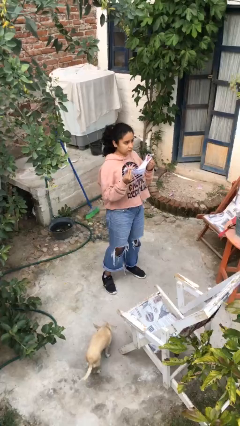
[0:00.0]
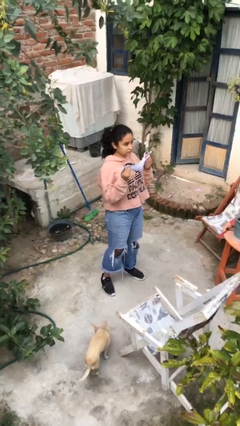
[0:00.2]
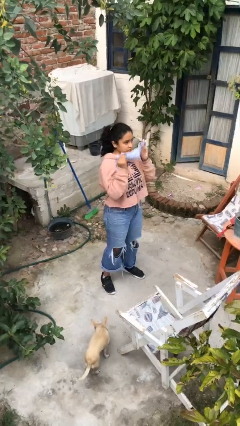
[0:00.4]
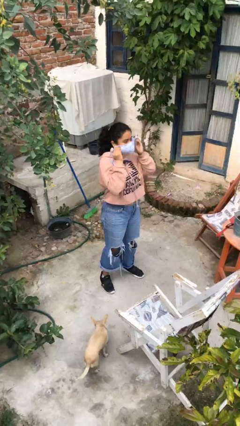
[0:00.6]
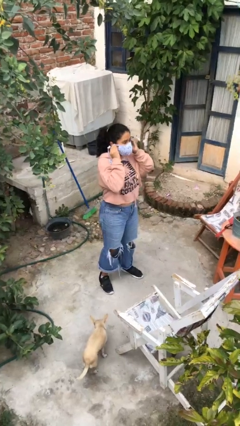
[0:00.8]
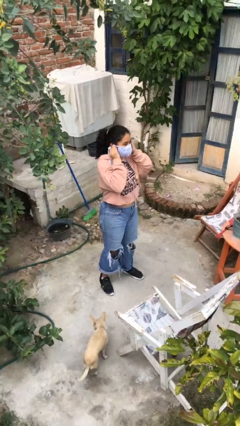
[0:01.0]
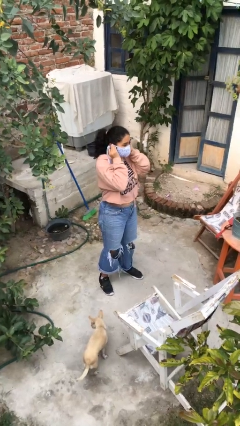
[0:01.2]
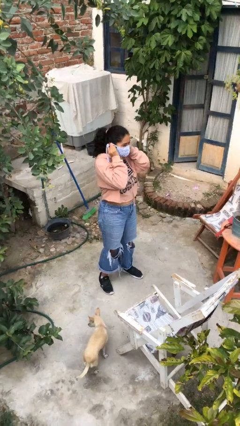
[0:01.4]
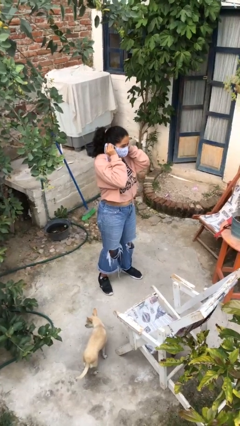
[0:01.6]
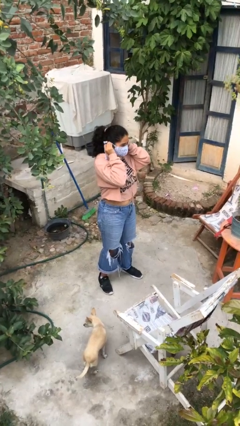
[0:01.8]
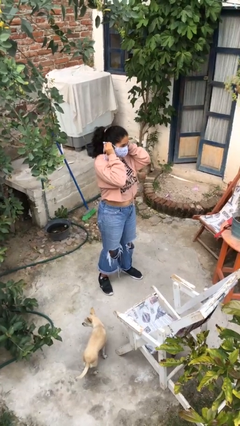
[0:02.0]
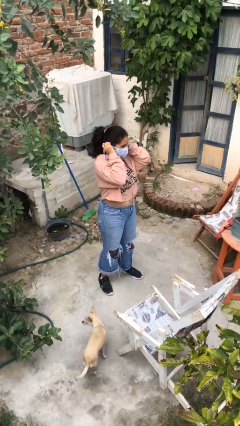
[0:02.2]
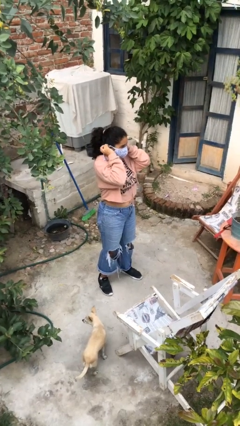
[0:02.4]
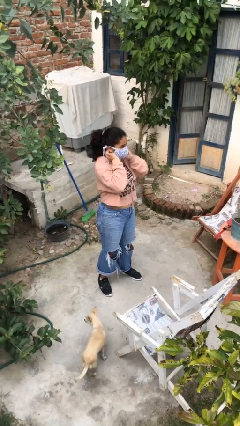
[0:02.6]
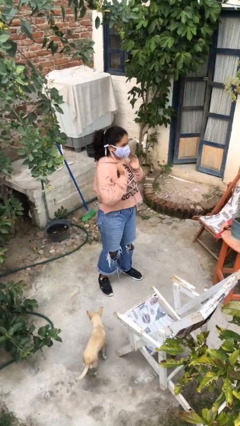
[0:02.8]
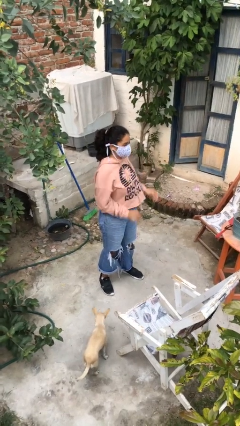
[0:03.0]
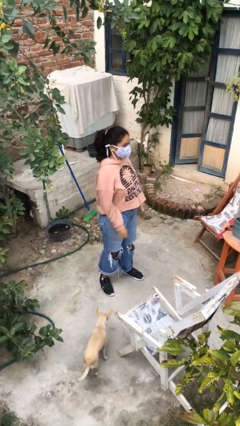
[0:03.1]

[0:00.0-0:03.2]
person puts on facemask

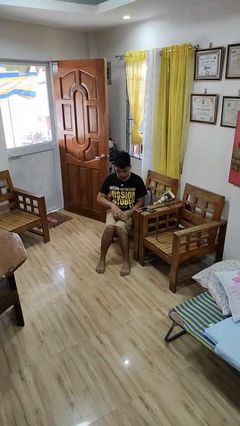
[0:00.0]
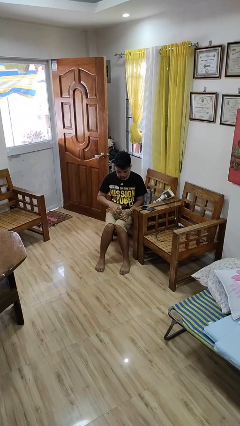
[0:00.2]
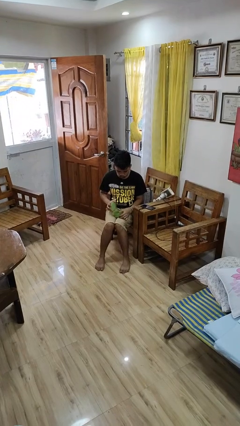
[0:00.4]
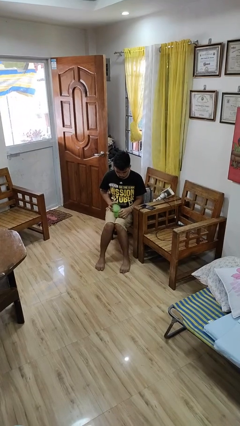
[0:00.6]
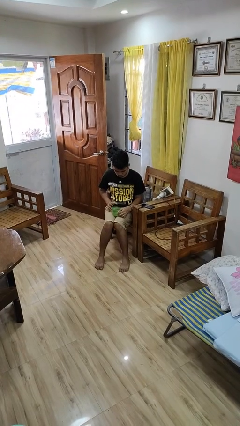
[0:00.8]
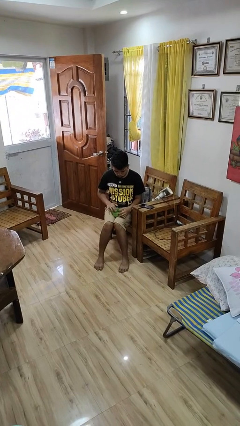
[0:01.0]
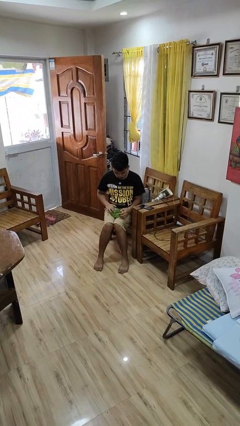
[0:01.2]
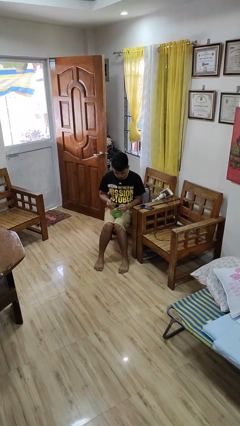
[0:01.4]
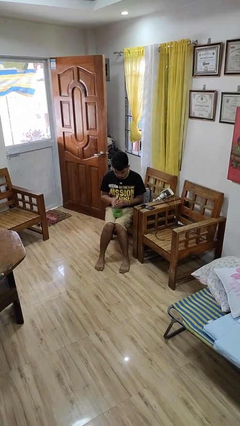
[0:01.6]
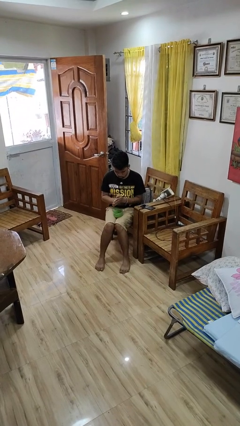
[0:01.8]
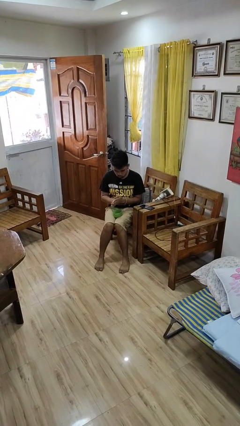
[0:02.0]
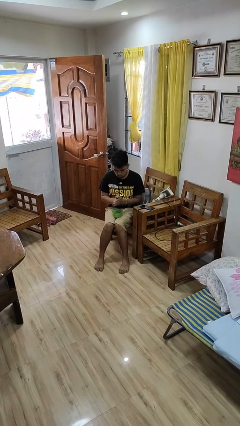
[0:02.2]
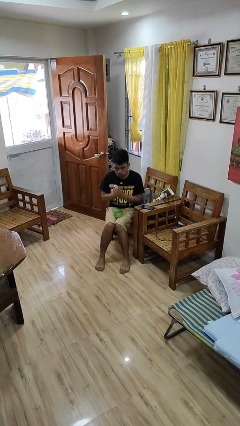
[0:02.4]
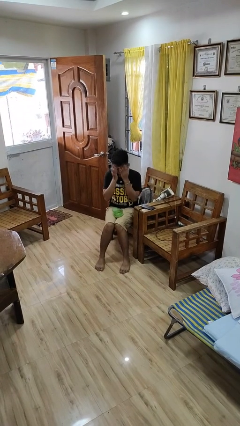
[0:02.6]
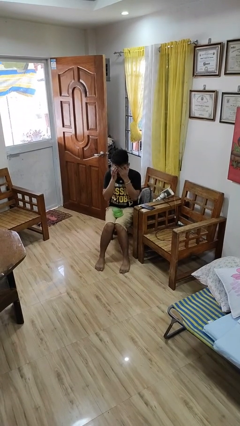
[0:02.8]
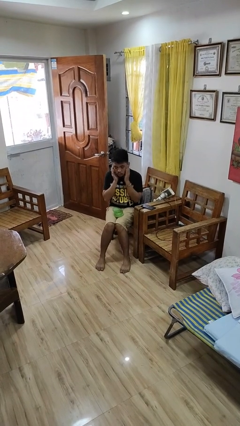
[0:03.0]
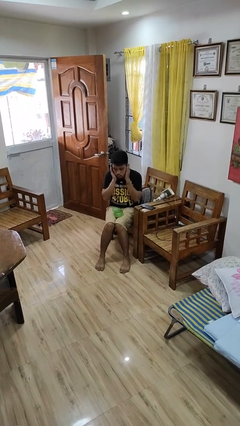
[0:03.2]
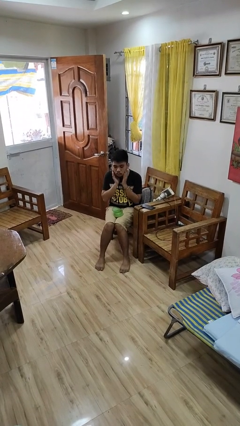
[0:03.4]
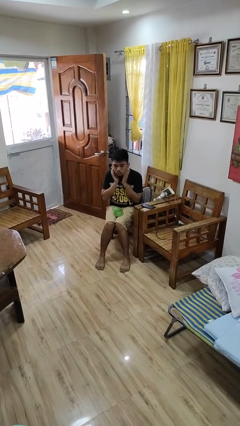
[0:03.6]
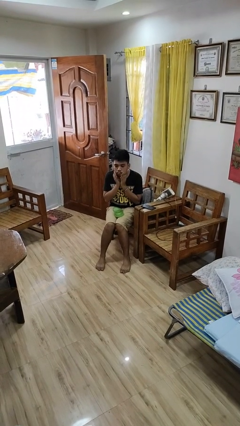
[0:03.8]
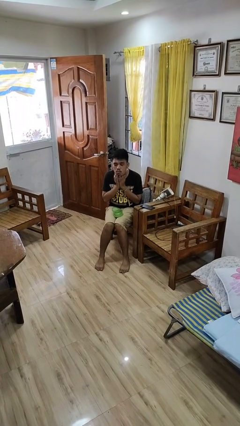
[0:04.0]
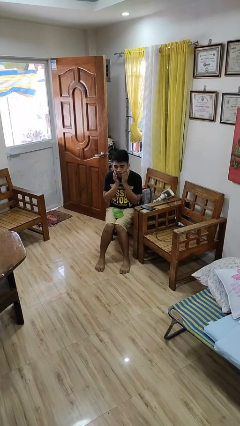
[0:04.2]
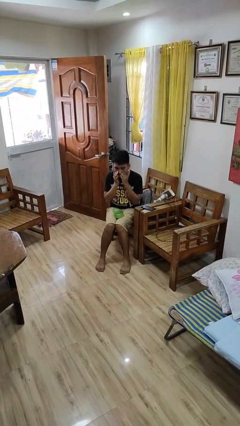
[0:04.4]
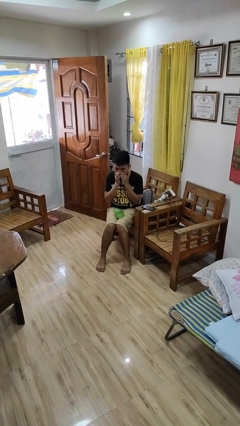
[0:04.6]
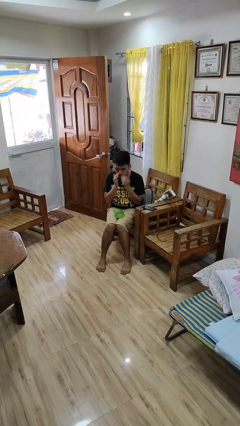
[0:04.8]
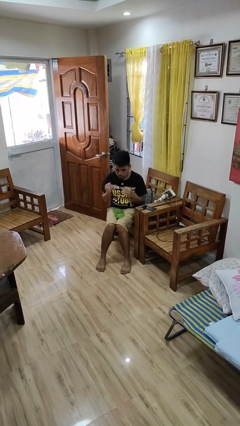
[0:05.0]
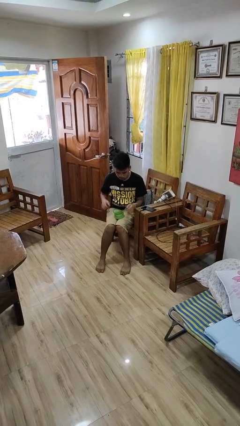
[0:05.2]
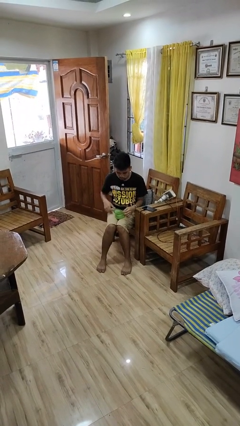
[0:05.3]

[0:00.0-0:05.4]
person applies facial moisturizer

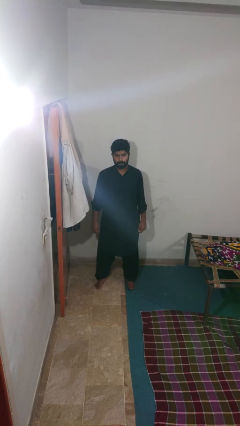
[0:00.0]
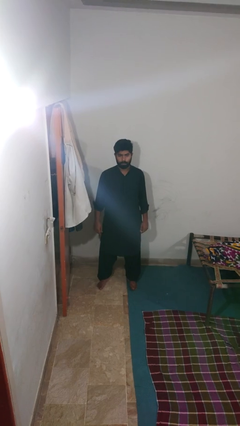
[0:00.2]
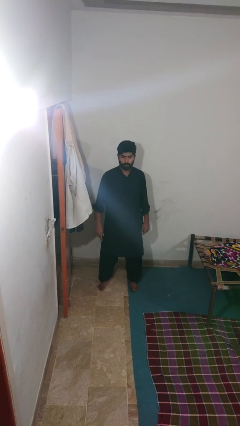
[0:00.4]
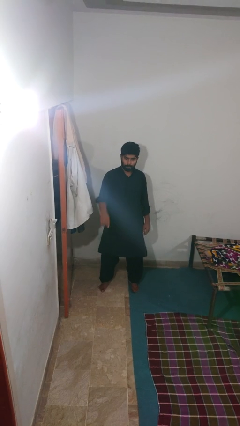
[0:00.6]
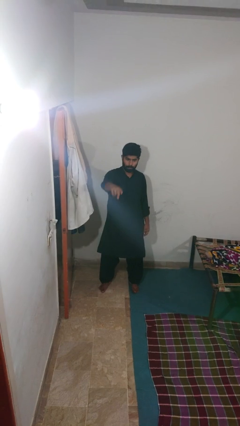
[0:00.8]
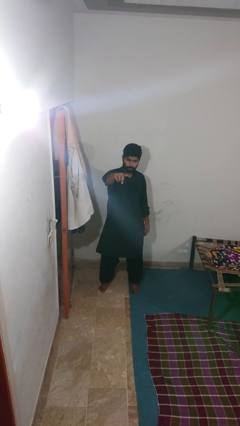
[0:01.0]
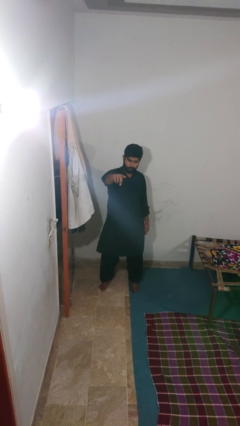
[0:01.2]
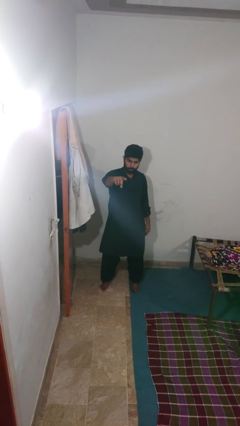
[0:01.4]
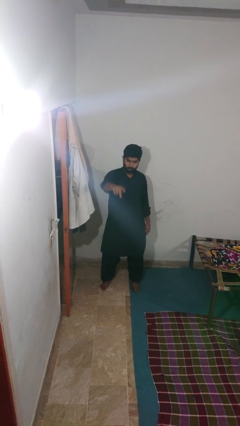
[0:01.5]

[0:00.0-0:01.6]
person points at person

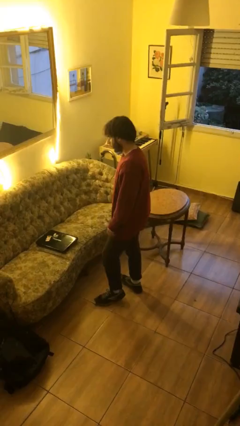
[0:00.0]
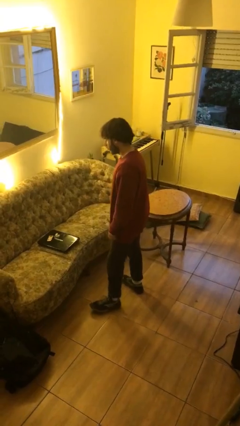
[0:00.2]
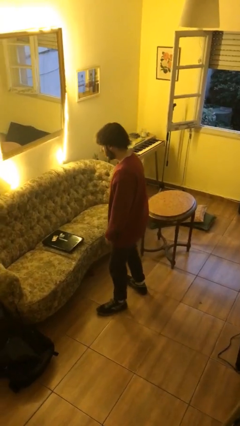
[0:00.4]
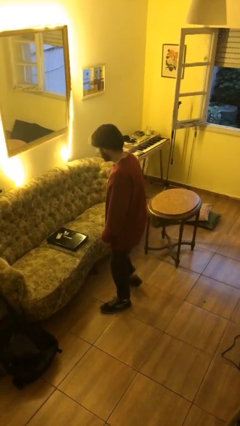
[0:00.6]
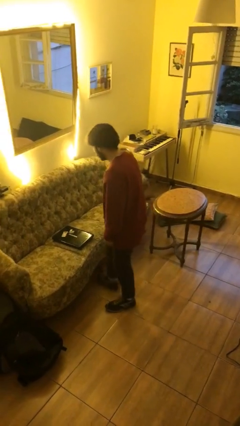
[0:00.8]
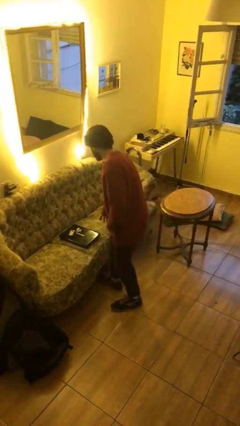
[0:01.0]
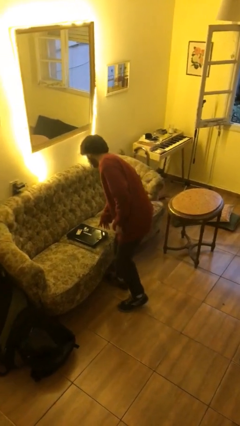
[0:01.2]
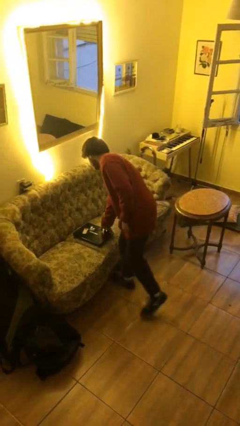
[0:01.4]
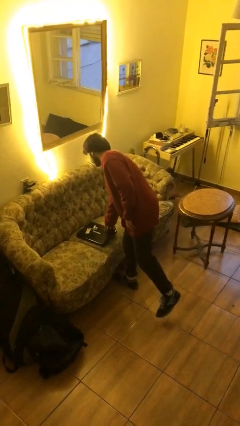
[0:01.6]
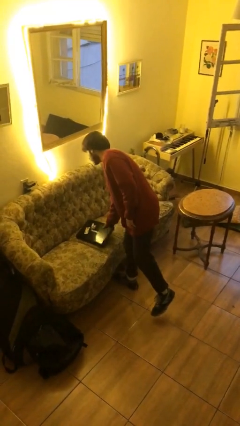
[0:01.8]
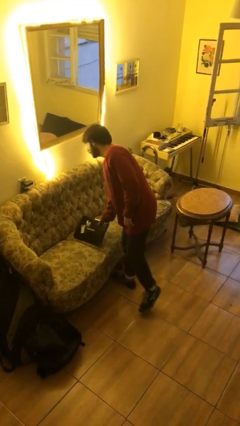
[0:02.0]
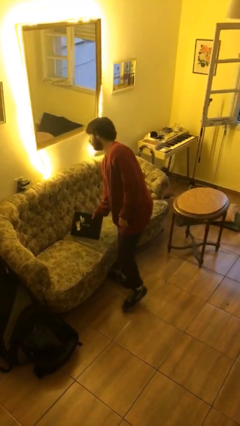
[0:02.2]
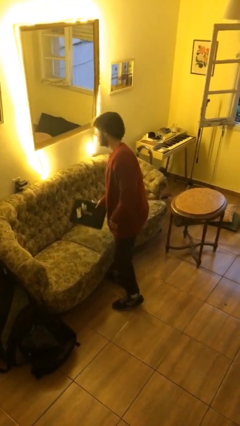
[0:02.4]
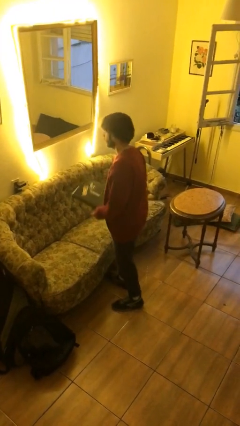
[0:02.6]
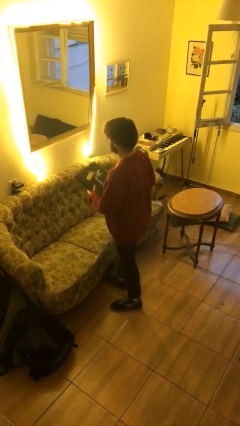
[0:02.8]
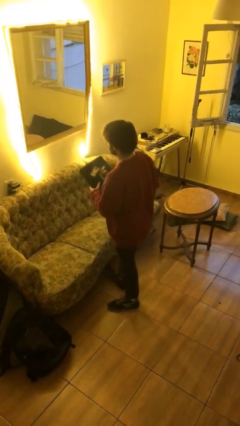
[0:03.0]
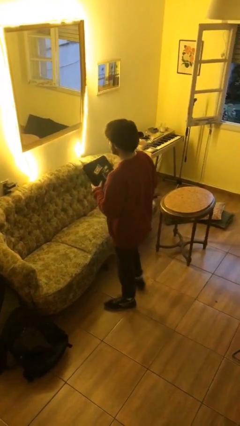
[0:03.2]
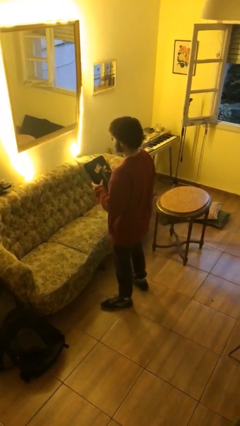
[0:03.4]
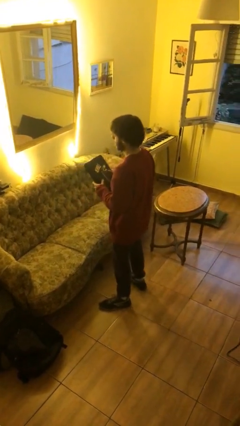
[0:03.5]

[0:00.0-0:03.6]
person picks up object from couch

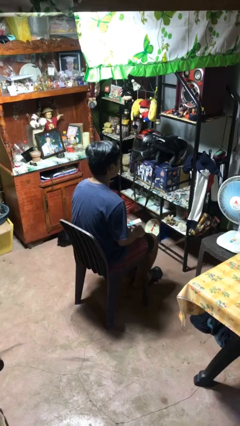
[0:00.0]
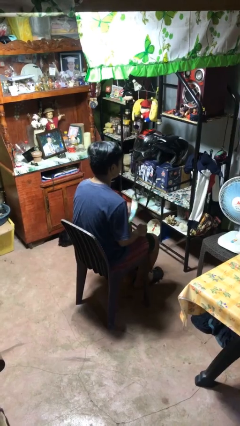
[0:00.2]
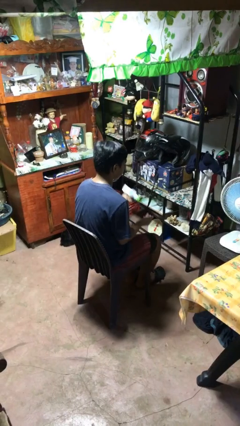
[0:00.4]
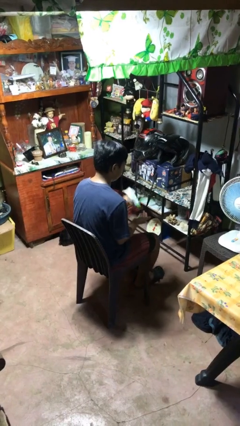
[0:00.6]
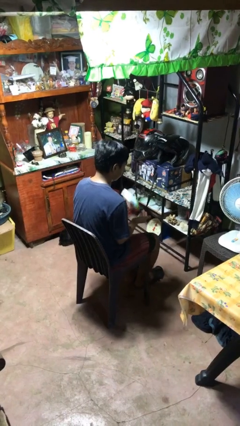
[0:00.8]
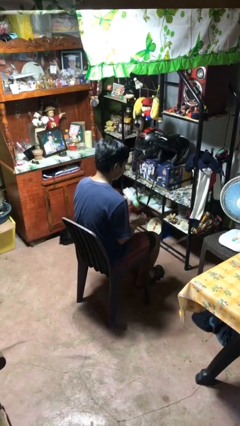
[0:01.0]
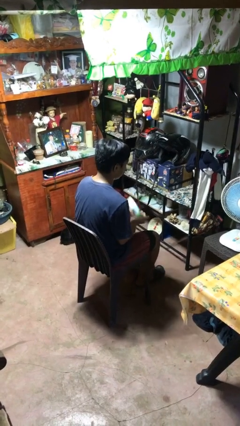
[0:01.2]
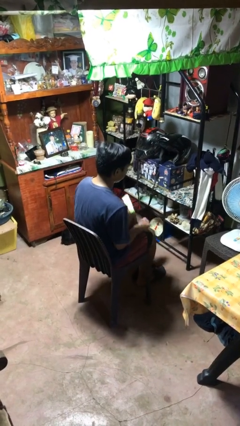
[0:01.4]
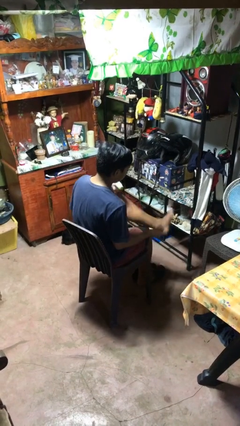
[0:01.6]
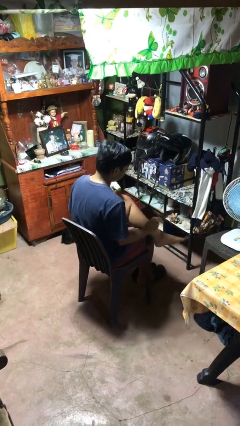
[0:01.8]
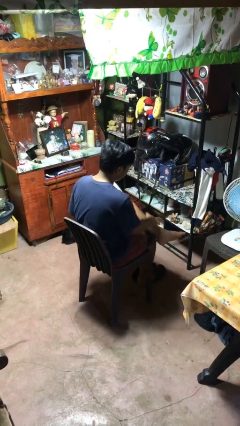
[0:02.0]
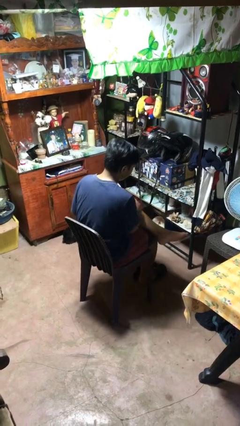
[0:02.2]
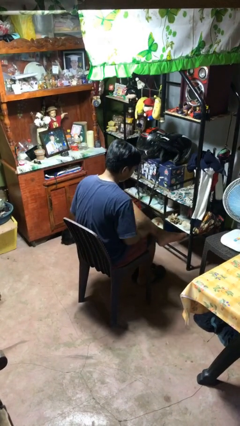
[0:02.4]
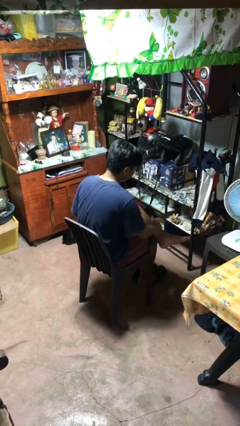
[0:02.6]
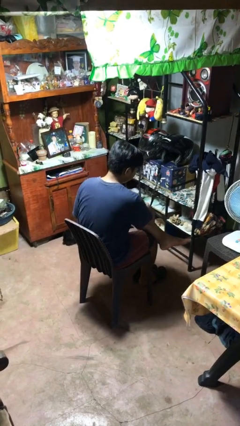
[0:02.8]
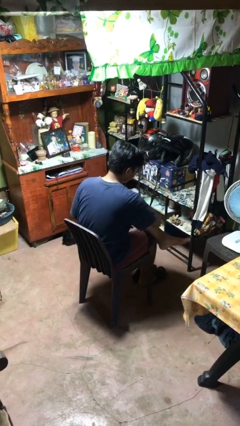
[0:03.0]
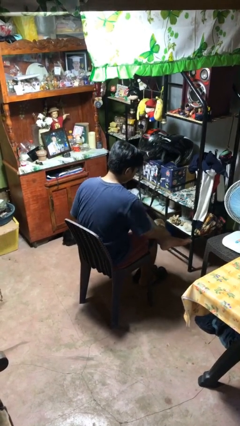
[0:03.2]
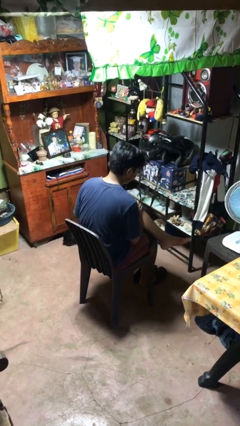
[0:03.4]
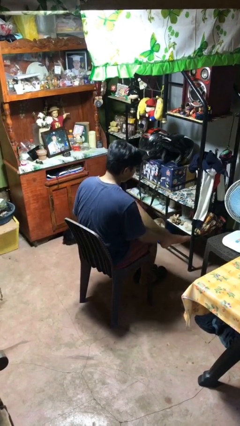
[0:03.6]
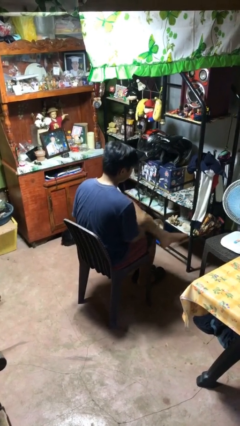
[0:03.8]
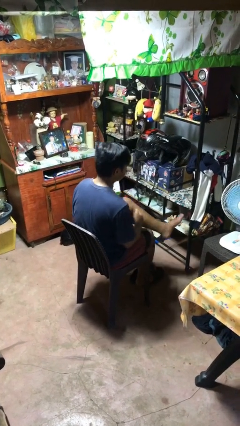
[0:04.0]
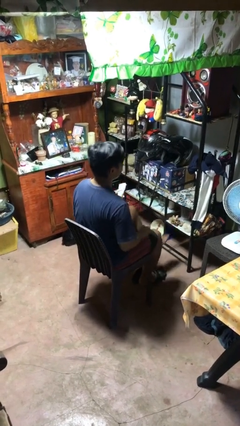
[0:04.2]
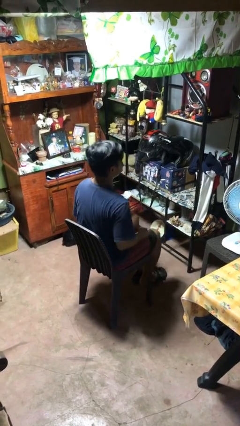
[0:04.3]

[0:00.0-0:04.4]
person applies sunscreen
